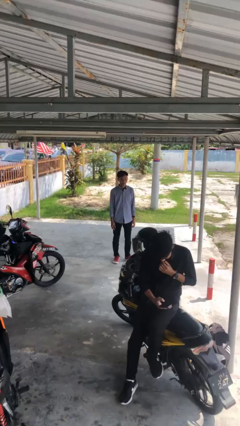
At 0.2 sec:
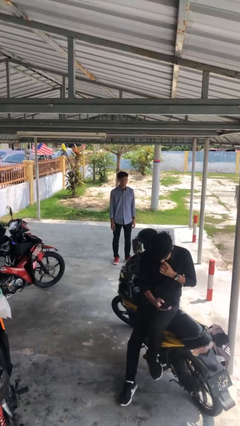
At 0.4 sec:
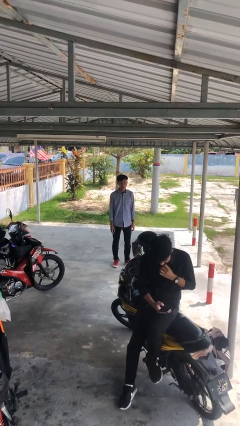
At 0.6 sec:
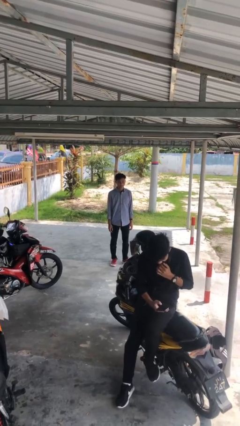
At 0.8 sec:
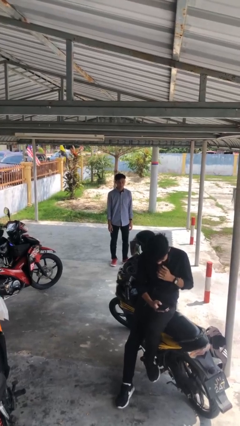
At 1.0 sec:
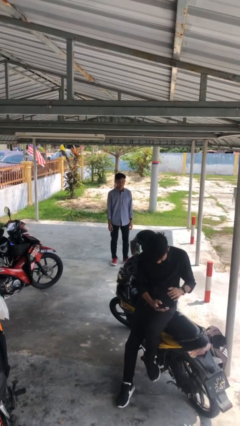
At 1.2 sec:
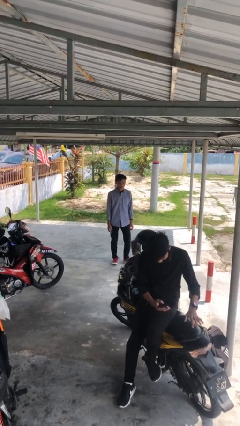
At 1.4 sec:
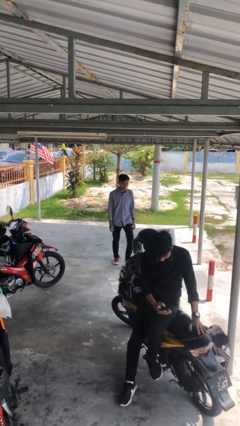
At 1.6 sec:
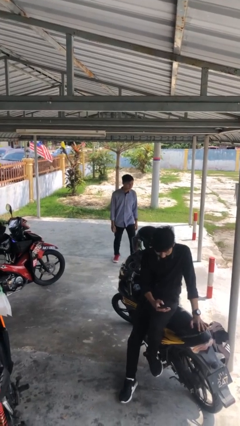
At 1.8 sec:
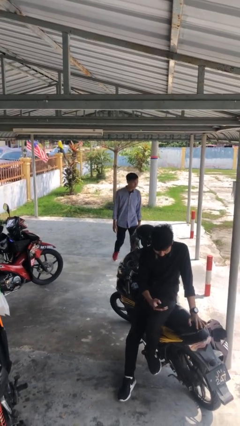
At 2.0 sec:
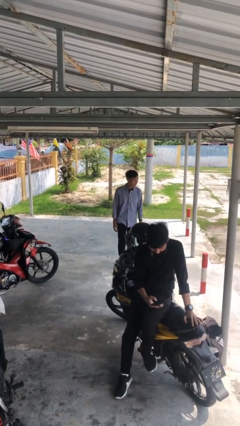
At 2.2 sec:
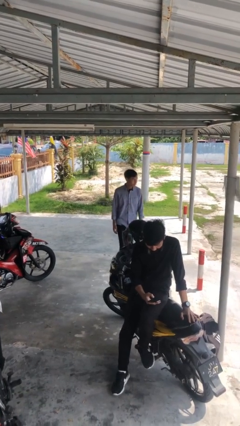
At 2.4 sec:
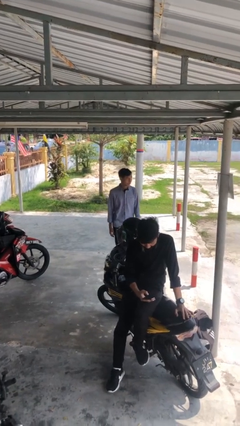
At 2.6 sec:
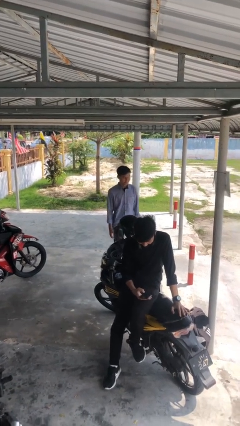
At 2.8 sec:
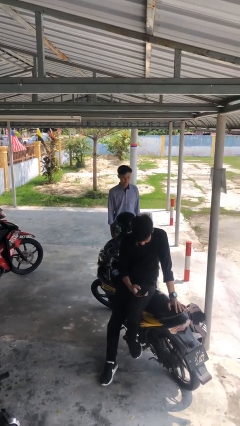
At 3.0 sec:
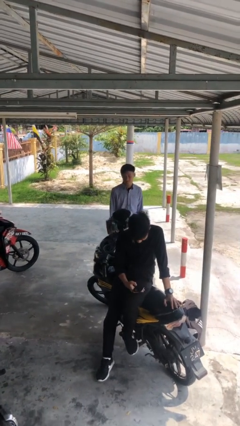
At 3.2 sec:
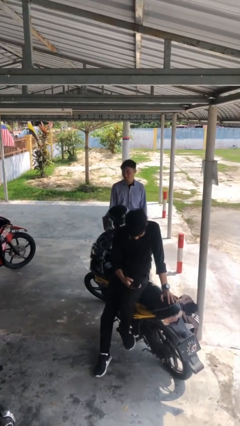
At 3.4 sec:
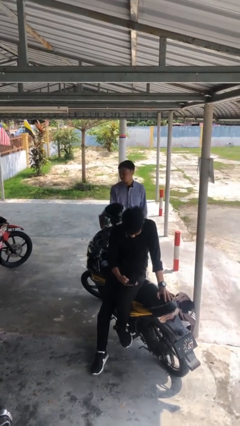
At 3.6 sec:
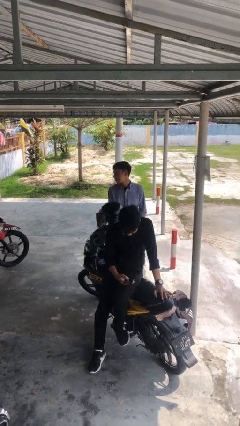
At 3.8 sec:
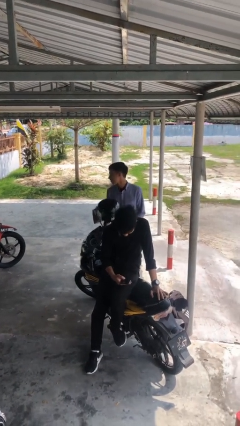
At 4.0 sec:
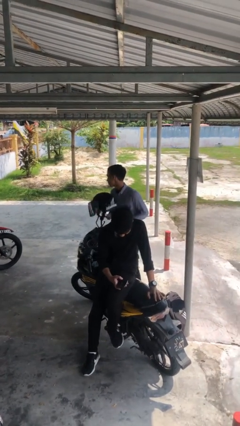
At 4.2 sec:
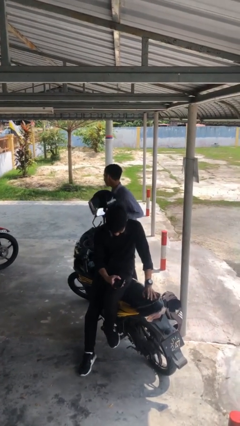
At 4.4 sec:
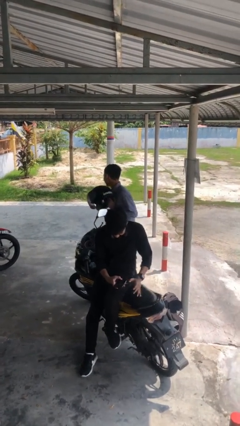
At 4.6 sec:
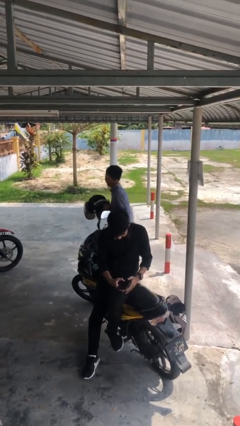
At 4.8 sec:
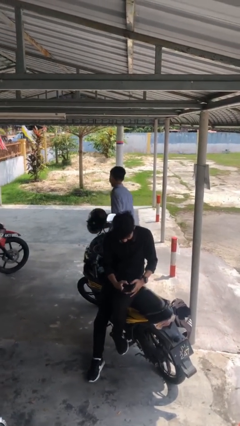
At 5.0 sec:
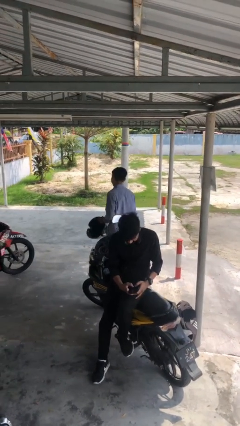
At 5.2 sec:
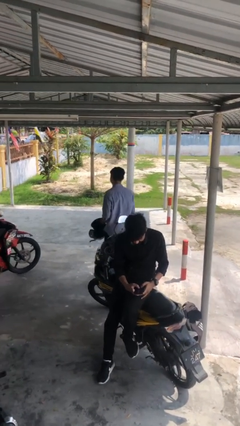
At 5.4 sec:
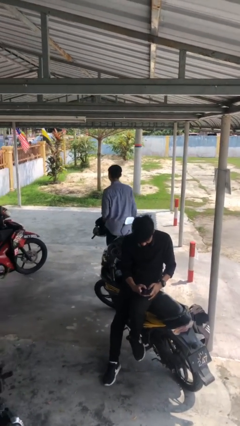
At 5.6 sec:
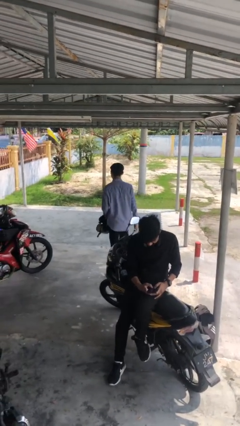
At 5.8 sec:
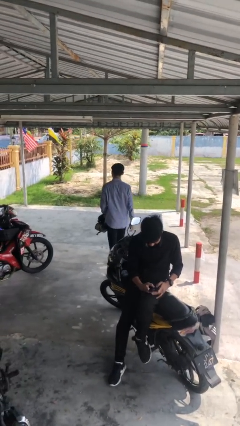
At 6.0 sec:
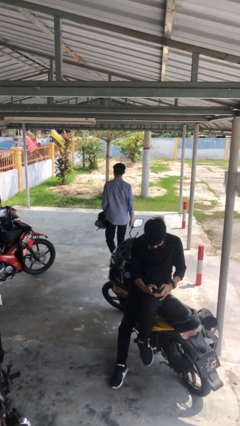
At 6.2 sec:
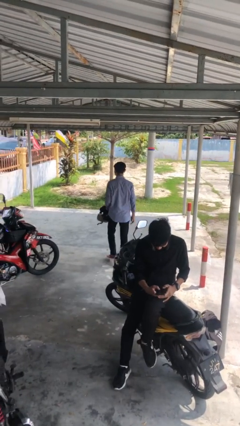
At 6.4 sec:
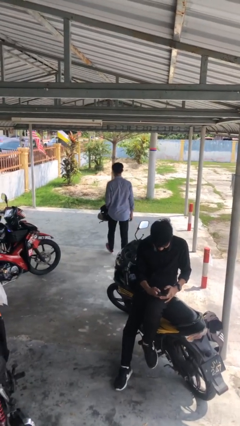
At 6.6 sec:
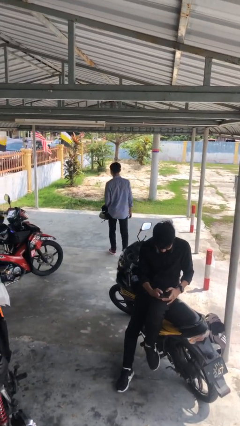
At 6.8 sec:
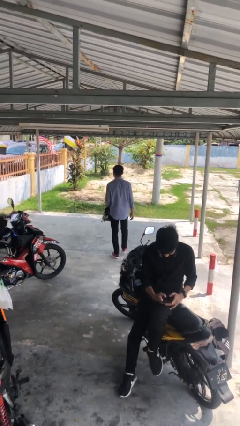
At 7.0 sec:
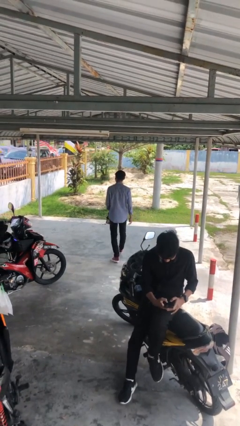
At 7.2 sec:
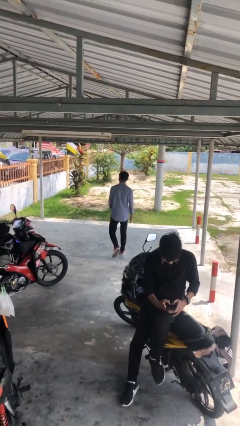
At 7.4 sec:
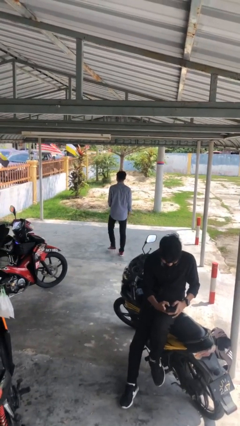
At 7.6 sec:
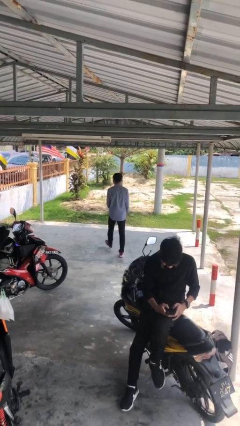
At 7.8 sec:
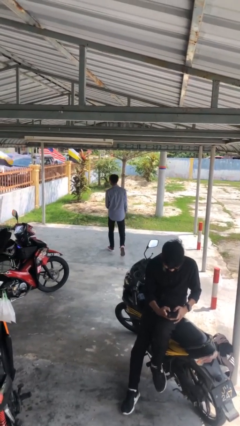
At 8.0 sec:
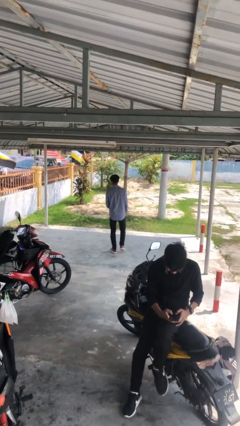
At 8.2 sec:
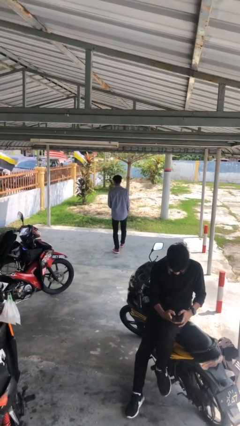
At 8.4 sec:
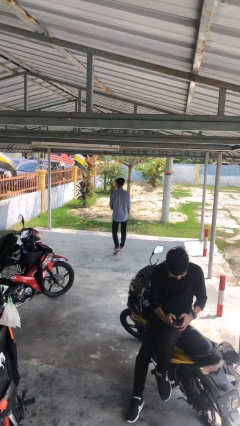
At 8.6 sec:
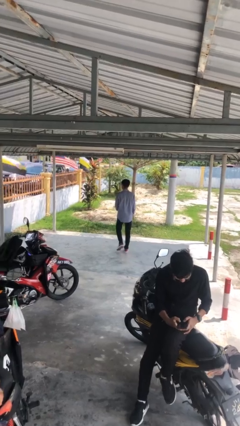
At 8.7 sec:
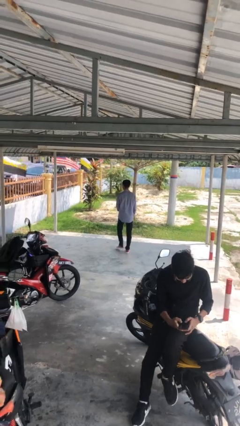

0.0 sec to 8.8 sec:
person steals object from person

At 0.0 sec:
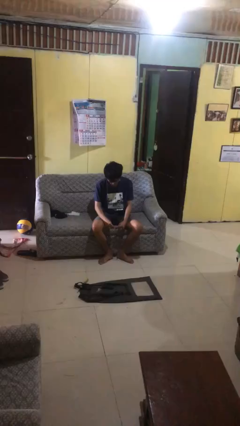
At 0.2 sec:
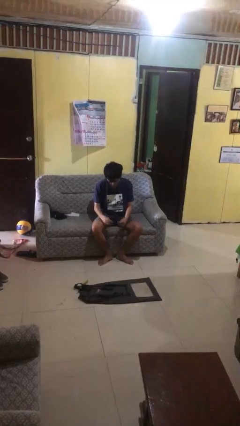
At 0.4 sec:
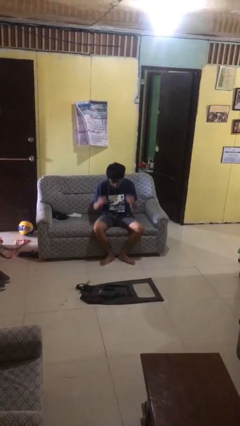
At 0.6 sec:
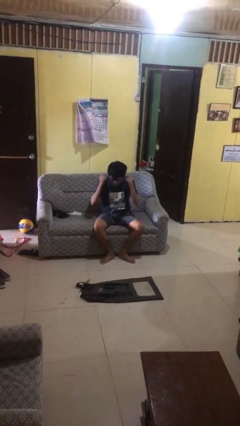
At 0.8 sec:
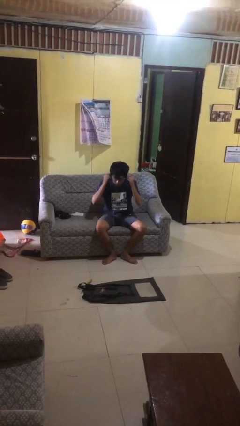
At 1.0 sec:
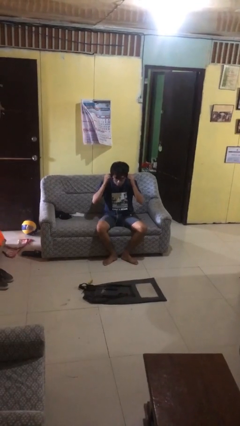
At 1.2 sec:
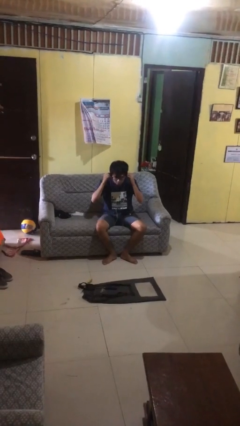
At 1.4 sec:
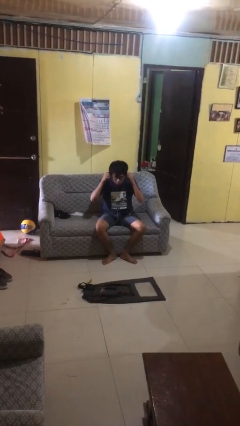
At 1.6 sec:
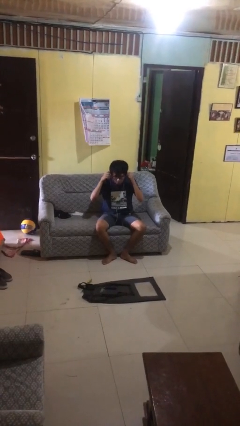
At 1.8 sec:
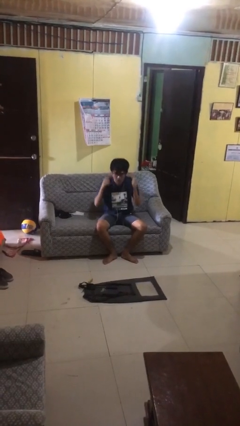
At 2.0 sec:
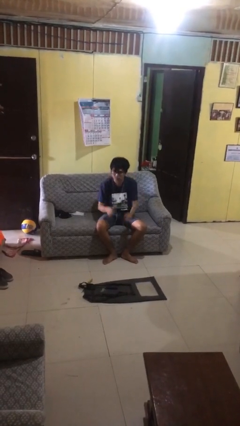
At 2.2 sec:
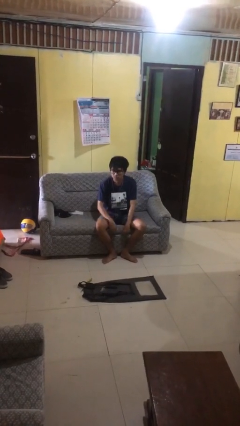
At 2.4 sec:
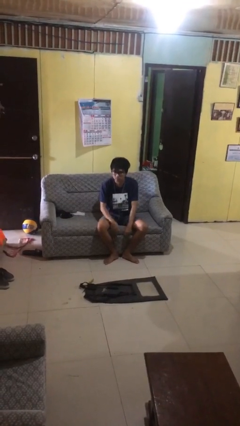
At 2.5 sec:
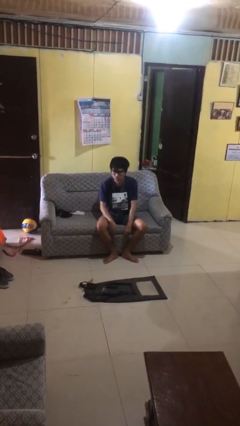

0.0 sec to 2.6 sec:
person puts on headphones

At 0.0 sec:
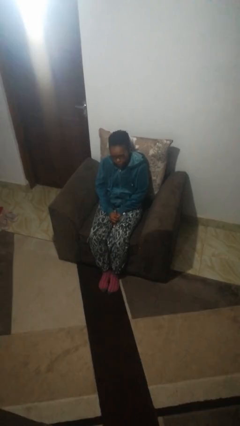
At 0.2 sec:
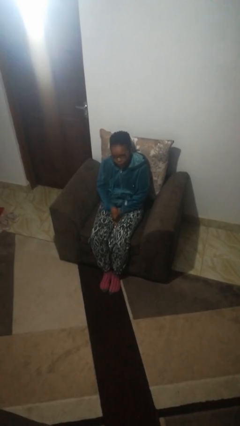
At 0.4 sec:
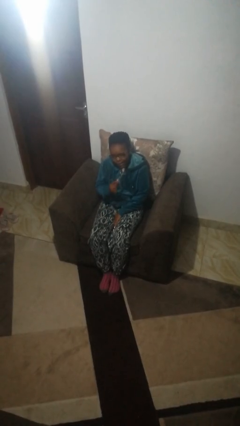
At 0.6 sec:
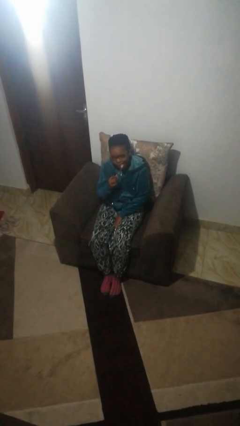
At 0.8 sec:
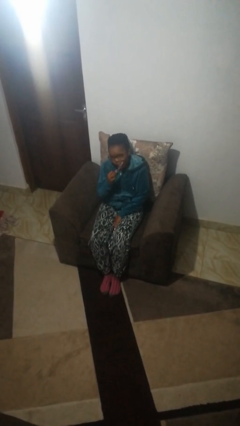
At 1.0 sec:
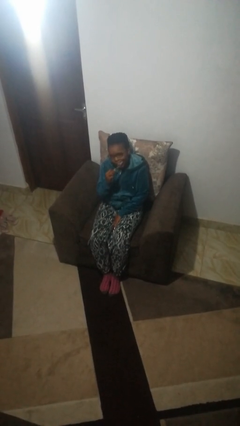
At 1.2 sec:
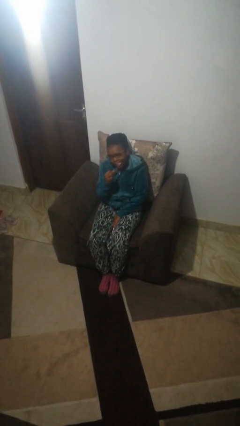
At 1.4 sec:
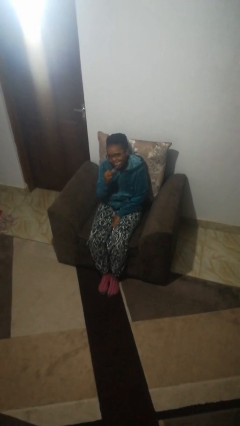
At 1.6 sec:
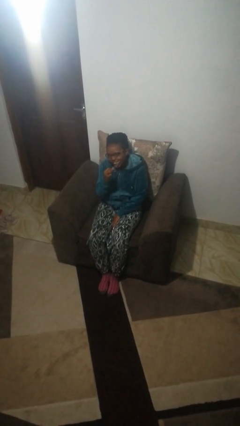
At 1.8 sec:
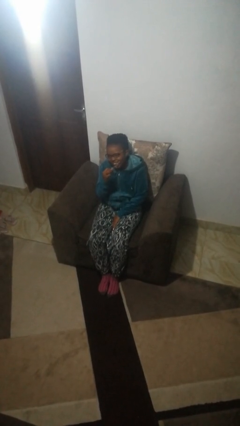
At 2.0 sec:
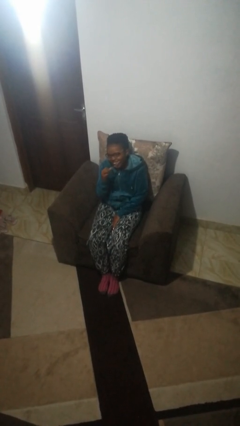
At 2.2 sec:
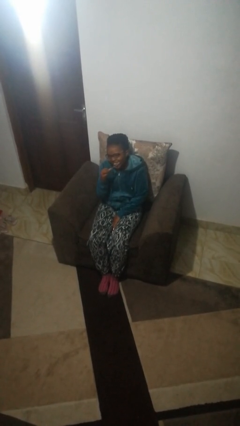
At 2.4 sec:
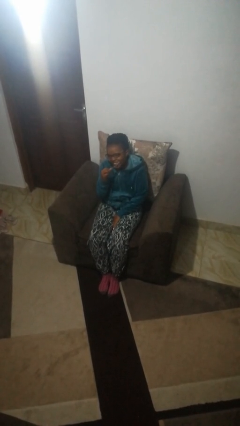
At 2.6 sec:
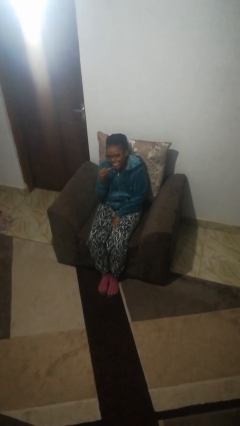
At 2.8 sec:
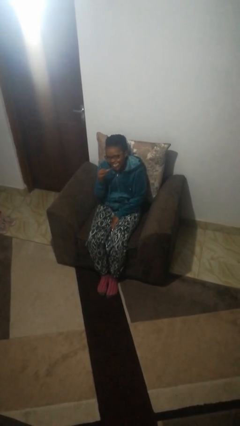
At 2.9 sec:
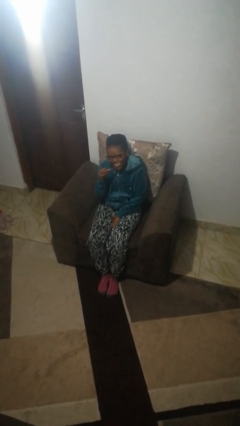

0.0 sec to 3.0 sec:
person brushes teeth

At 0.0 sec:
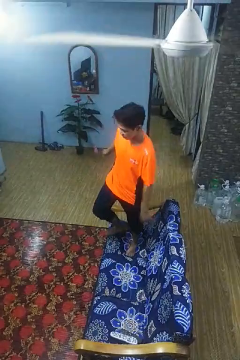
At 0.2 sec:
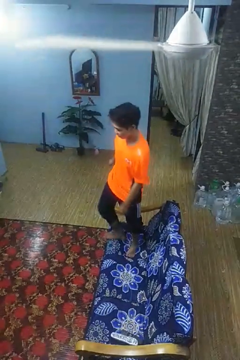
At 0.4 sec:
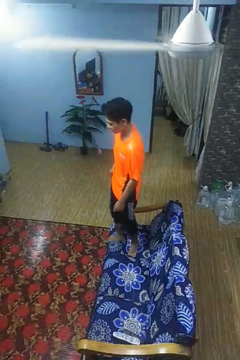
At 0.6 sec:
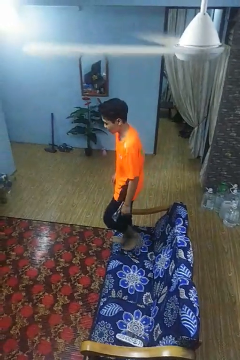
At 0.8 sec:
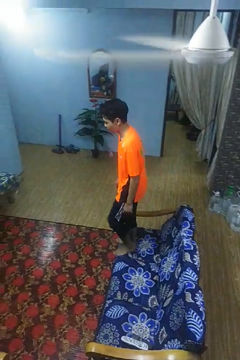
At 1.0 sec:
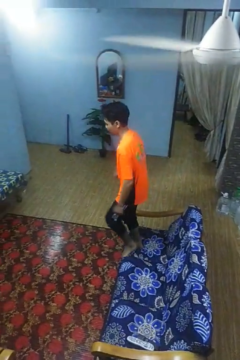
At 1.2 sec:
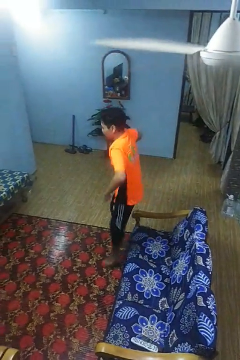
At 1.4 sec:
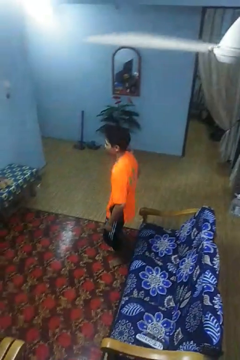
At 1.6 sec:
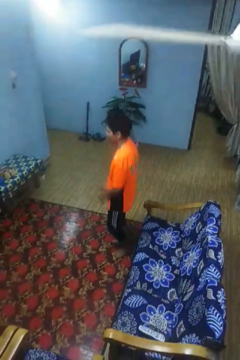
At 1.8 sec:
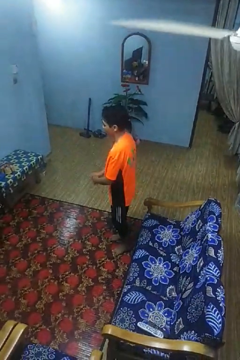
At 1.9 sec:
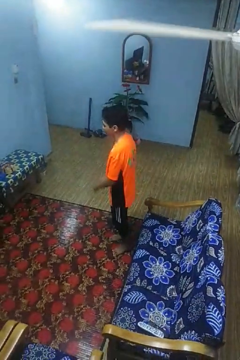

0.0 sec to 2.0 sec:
person jumps on couch

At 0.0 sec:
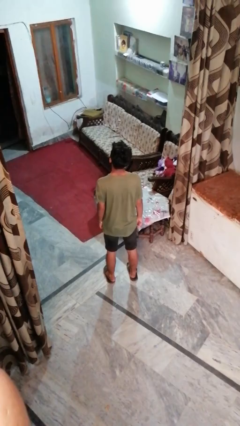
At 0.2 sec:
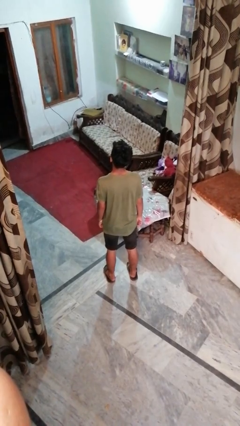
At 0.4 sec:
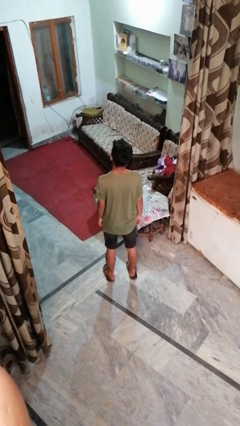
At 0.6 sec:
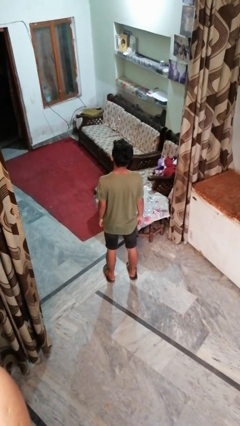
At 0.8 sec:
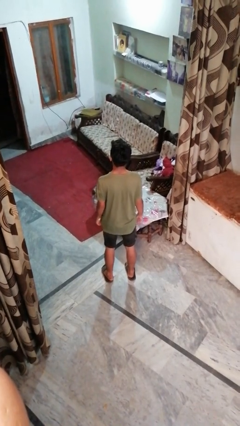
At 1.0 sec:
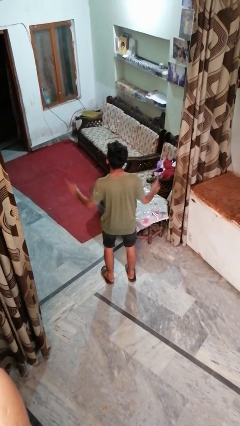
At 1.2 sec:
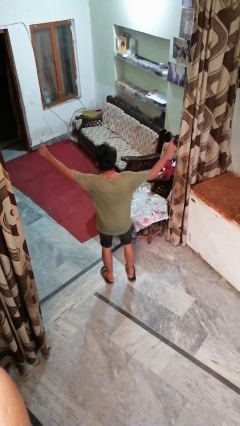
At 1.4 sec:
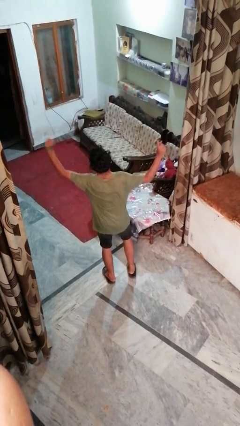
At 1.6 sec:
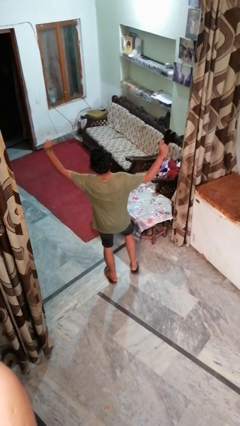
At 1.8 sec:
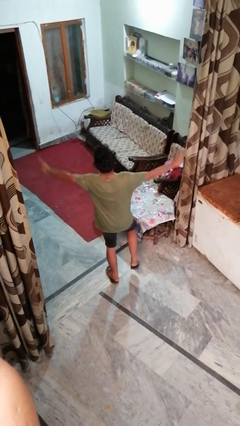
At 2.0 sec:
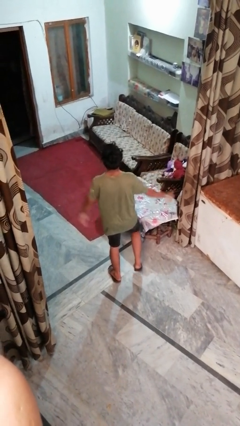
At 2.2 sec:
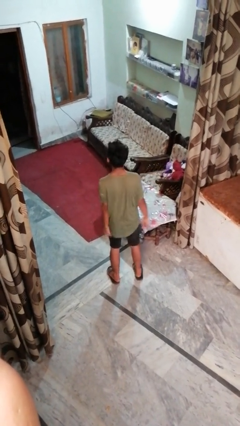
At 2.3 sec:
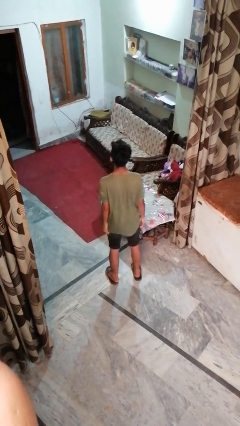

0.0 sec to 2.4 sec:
person dances in place
